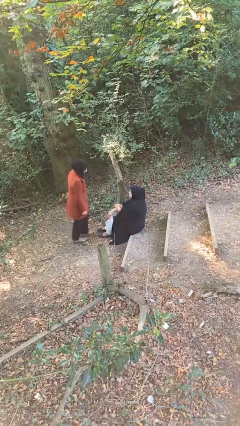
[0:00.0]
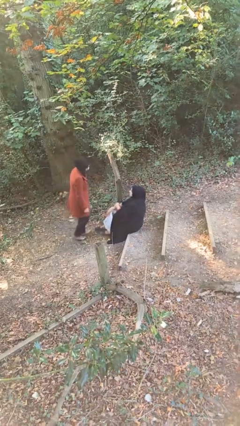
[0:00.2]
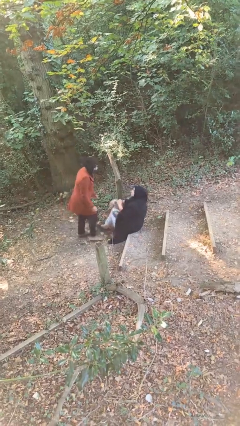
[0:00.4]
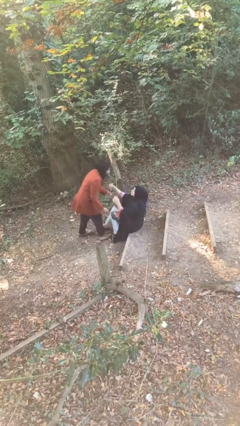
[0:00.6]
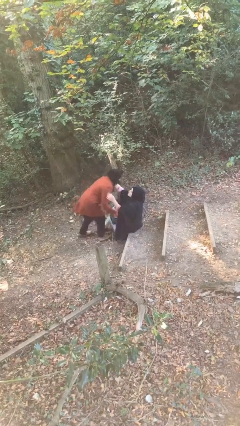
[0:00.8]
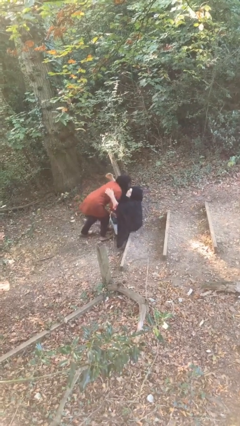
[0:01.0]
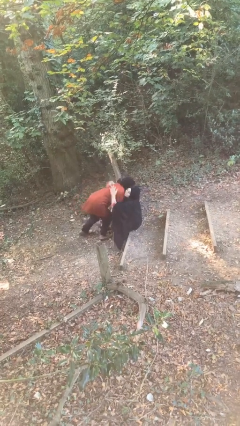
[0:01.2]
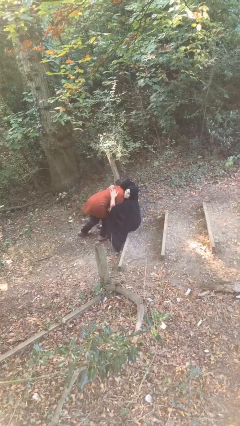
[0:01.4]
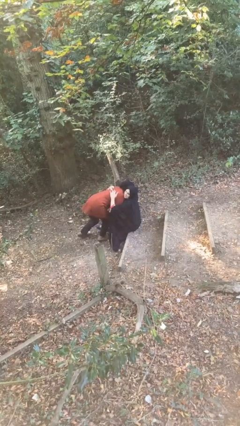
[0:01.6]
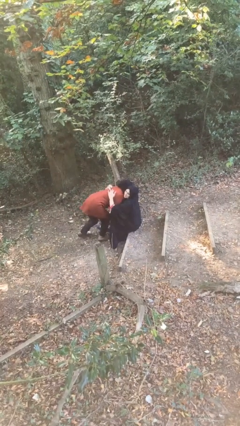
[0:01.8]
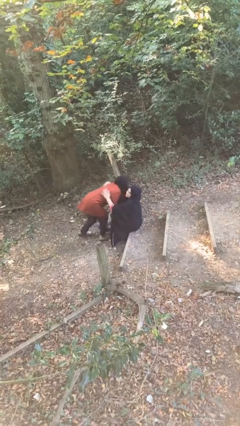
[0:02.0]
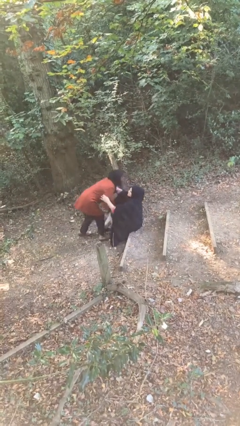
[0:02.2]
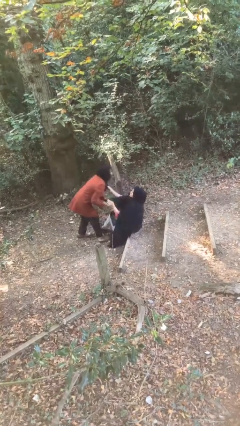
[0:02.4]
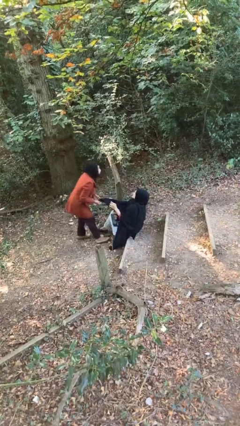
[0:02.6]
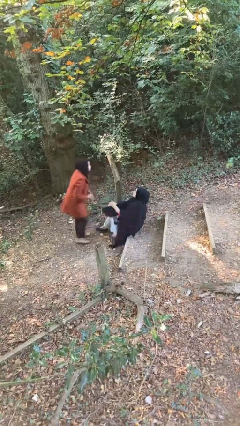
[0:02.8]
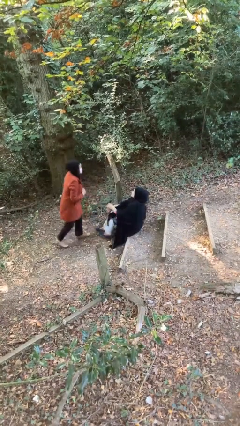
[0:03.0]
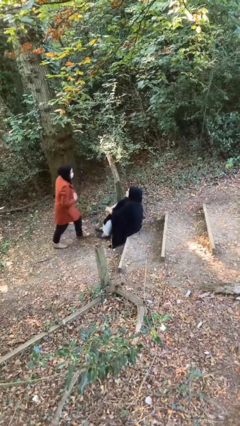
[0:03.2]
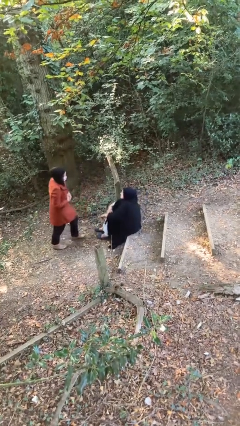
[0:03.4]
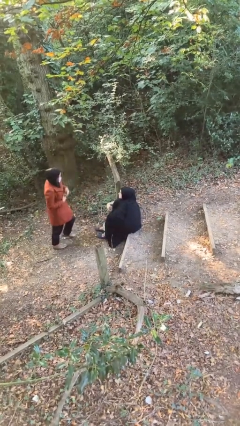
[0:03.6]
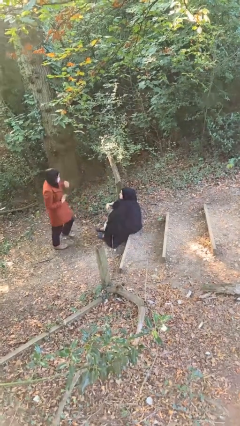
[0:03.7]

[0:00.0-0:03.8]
person embraces person

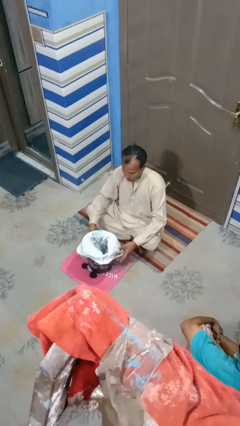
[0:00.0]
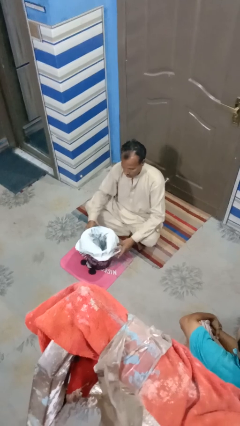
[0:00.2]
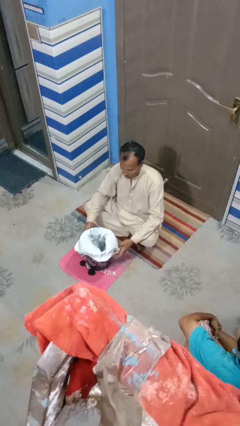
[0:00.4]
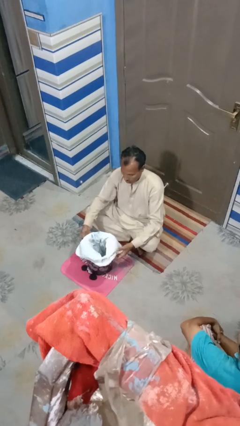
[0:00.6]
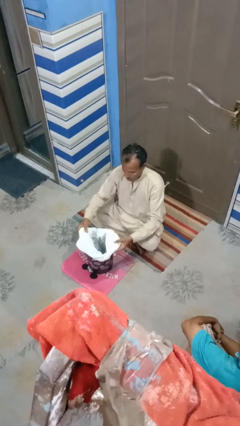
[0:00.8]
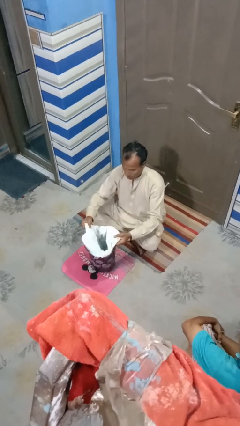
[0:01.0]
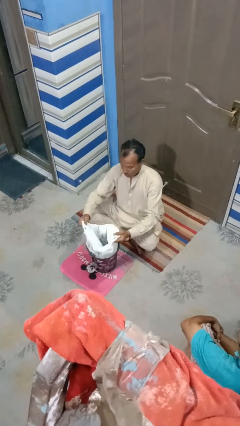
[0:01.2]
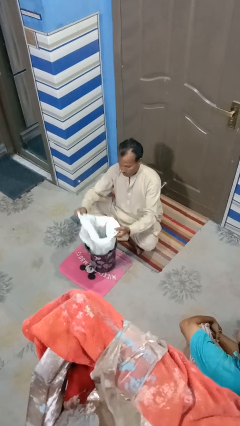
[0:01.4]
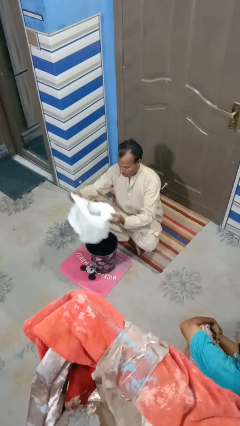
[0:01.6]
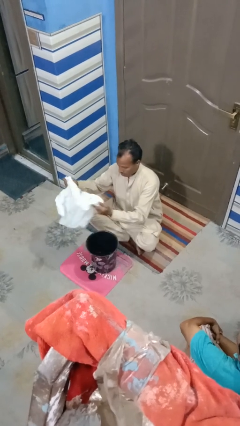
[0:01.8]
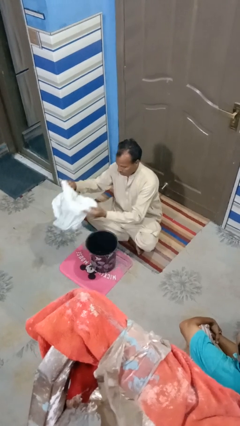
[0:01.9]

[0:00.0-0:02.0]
person inserts trashbag into trashcan

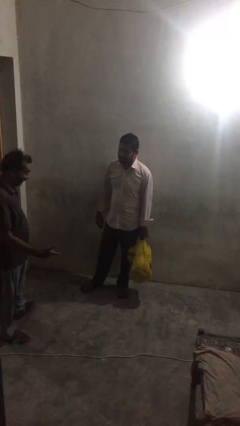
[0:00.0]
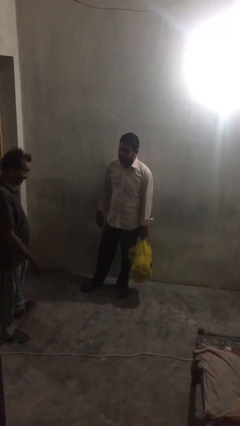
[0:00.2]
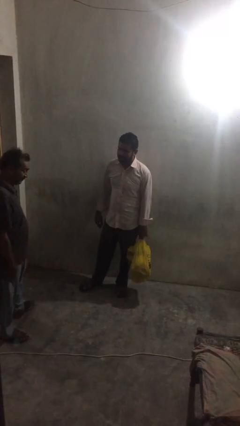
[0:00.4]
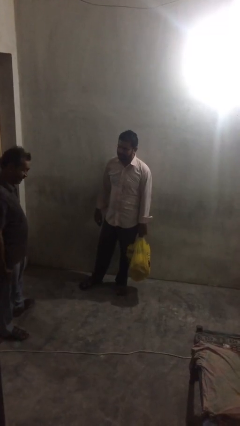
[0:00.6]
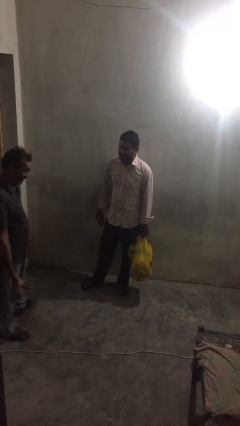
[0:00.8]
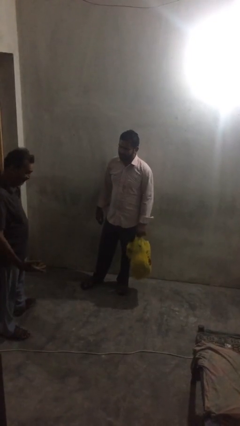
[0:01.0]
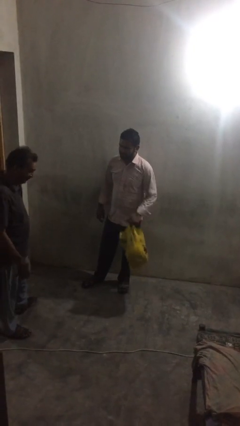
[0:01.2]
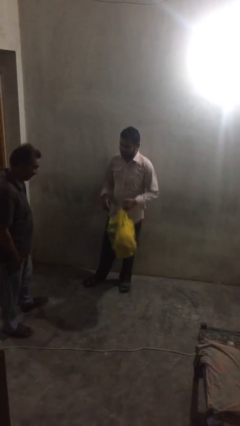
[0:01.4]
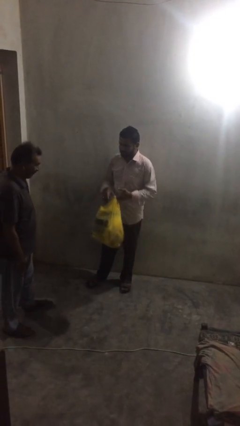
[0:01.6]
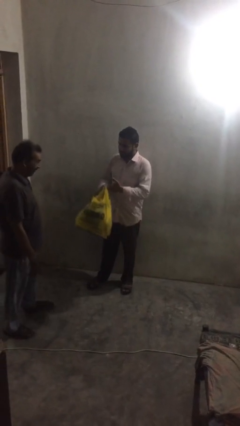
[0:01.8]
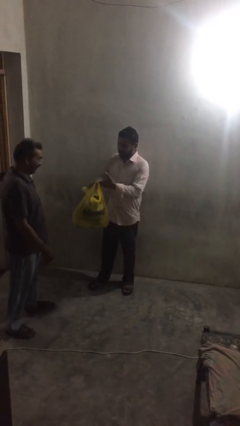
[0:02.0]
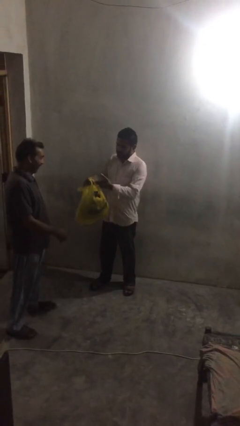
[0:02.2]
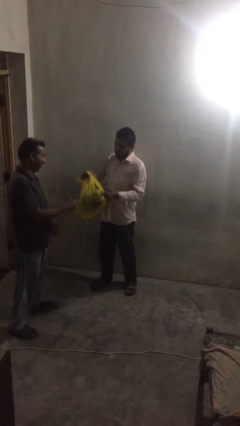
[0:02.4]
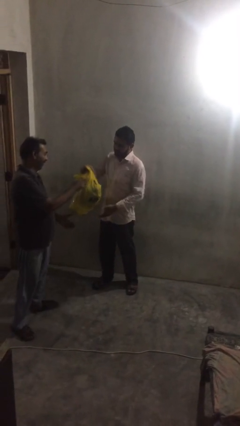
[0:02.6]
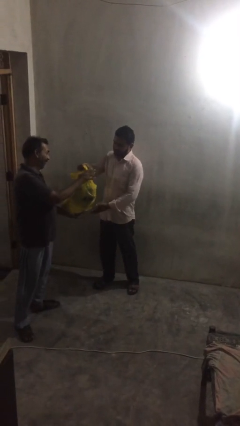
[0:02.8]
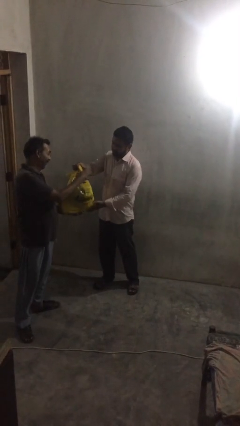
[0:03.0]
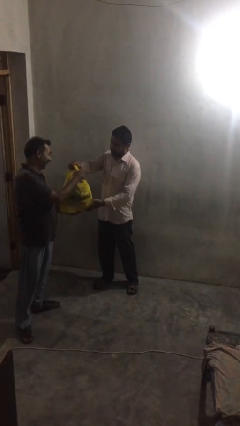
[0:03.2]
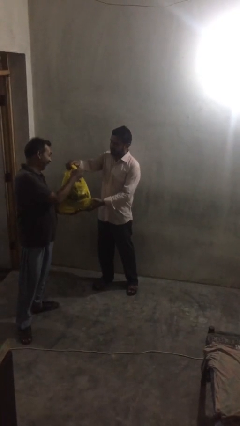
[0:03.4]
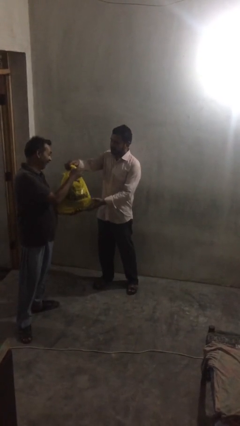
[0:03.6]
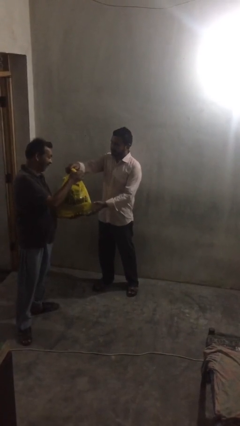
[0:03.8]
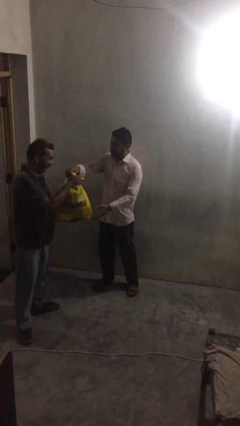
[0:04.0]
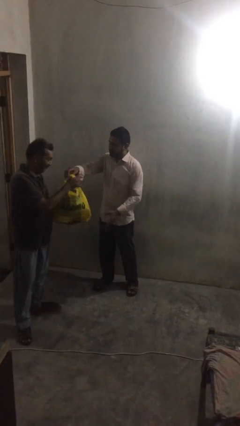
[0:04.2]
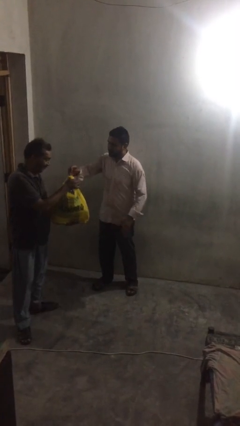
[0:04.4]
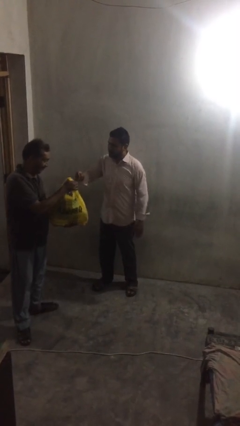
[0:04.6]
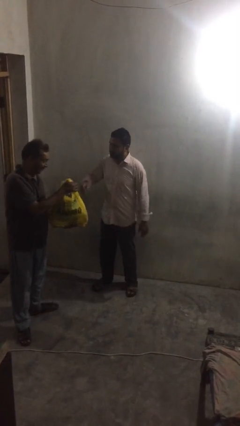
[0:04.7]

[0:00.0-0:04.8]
person transfers object to person

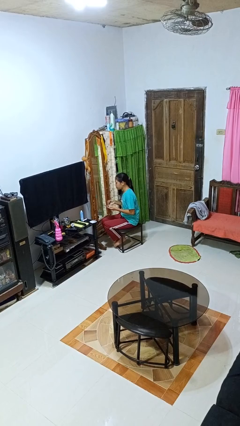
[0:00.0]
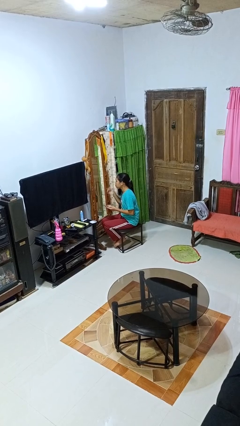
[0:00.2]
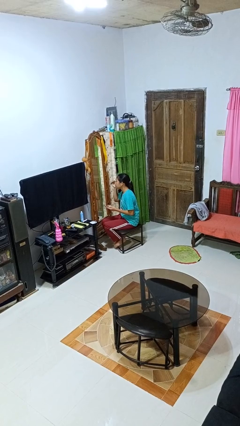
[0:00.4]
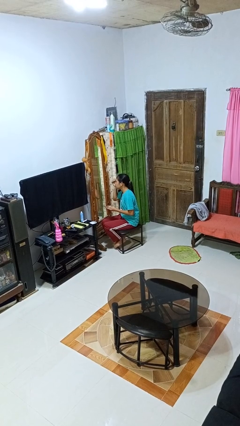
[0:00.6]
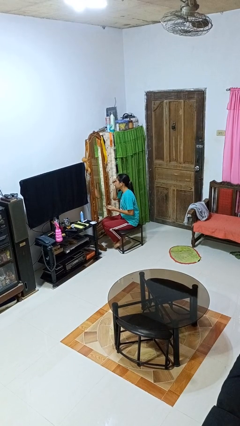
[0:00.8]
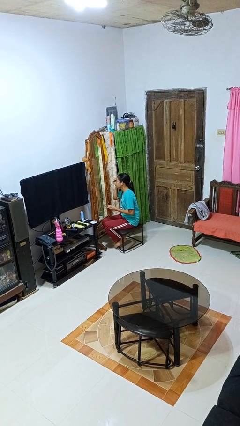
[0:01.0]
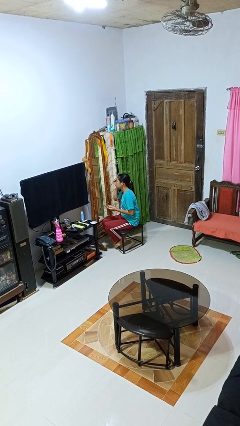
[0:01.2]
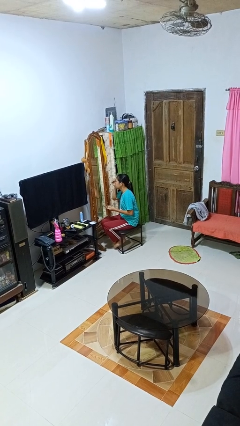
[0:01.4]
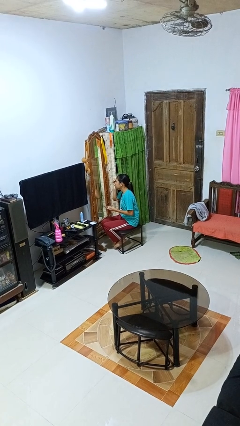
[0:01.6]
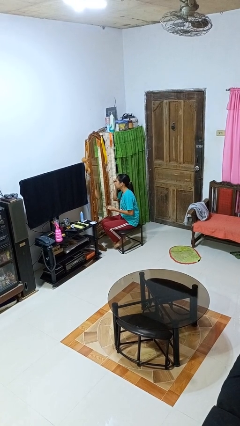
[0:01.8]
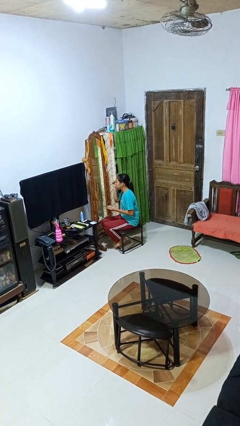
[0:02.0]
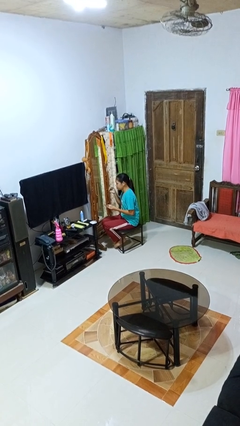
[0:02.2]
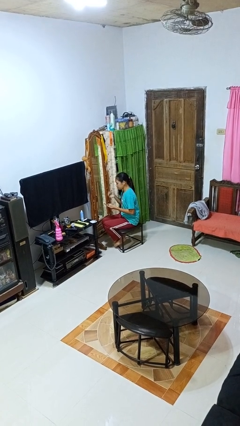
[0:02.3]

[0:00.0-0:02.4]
person applies eye makeup

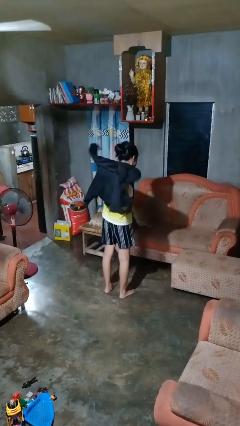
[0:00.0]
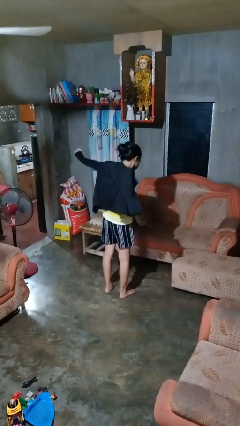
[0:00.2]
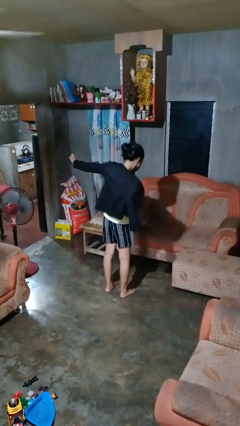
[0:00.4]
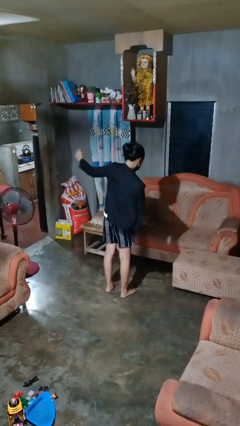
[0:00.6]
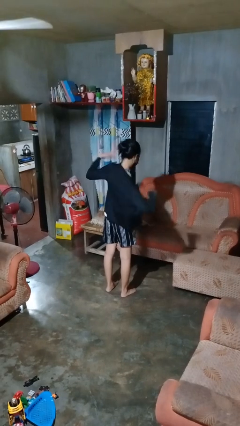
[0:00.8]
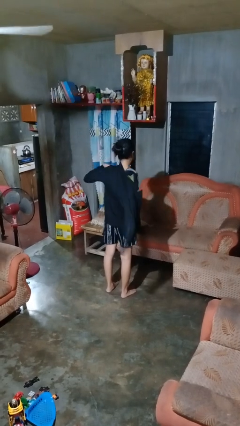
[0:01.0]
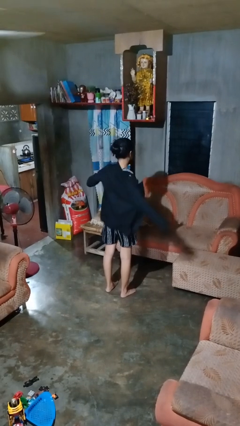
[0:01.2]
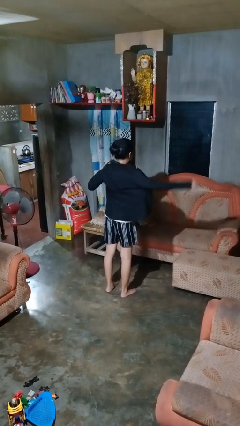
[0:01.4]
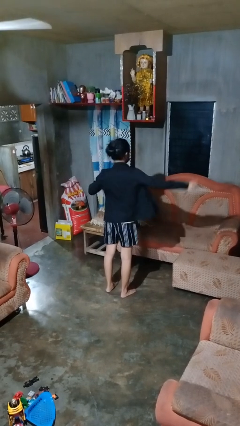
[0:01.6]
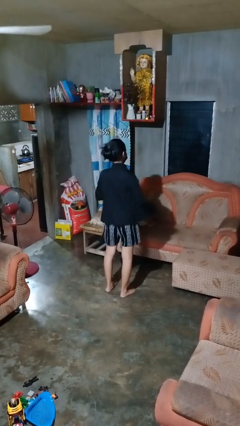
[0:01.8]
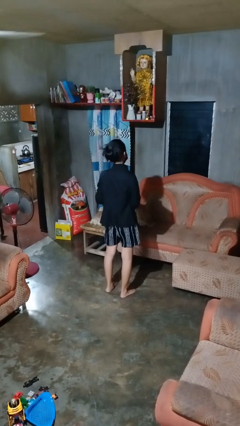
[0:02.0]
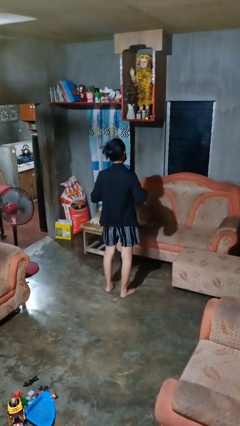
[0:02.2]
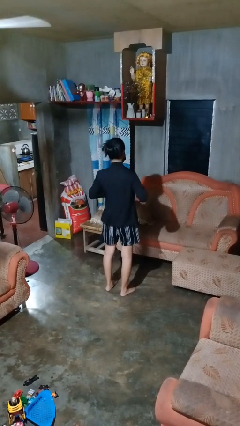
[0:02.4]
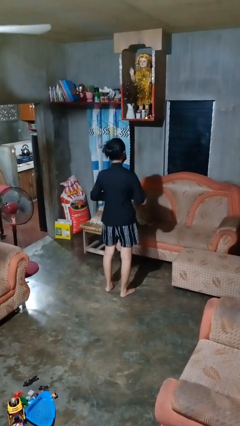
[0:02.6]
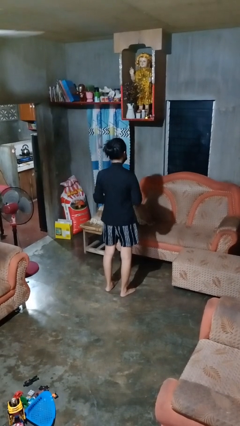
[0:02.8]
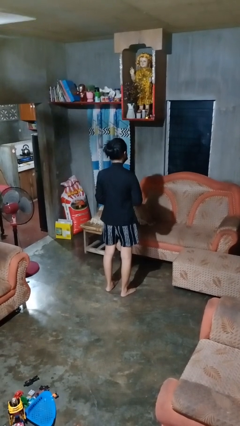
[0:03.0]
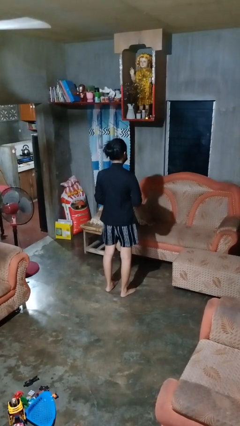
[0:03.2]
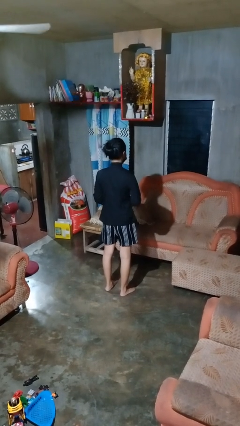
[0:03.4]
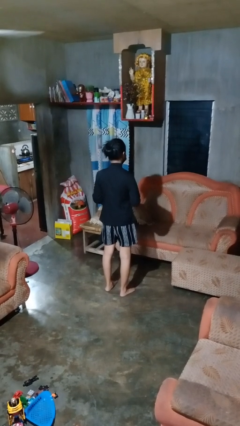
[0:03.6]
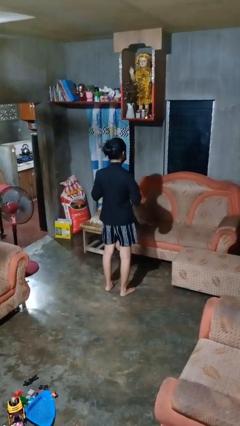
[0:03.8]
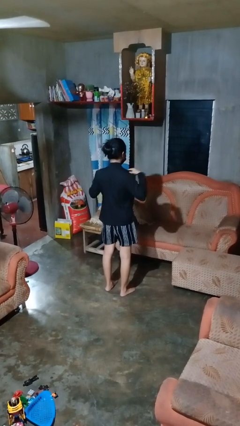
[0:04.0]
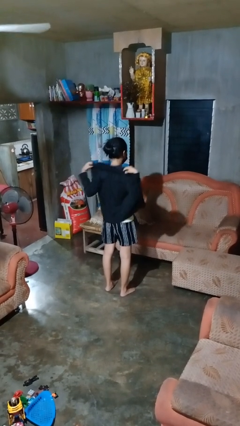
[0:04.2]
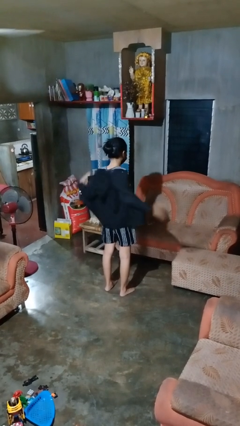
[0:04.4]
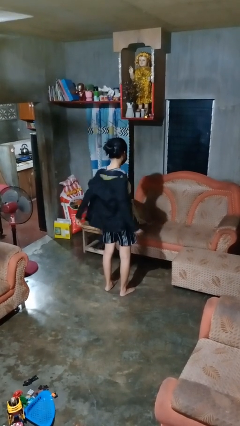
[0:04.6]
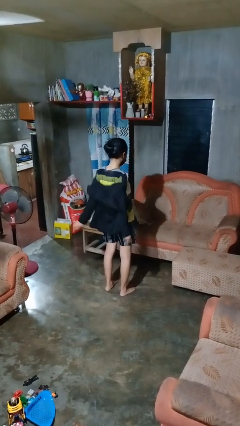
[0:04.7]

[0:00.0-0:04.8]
person puts on shirt
